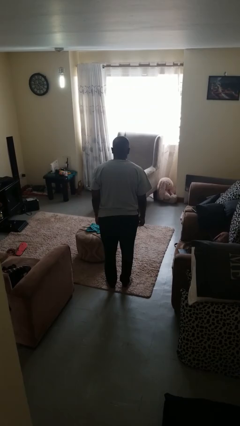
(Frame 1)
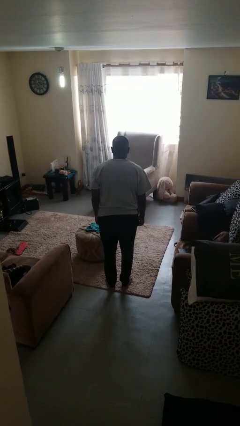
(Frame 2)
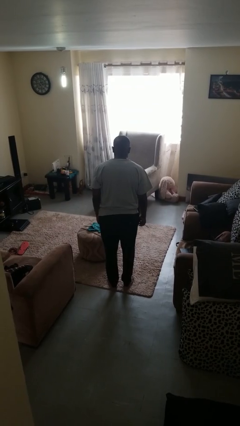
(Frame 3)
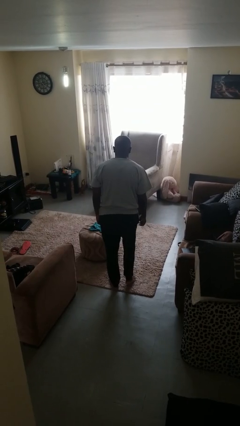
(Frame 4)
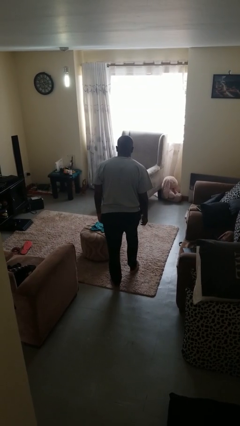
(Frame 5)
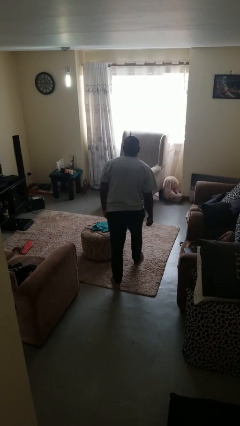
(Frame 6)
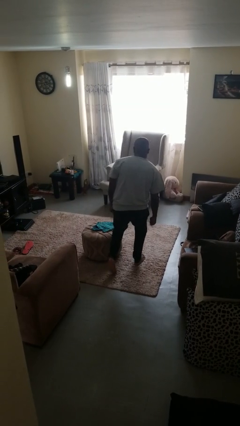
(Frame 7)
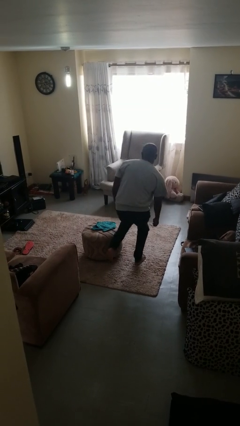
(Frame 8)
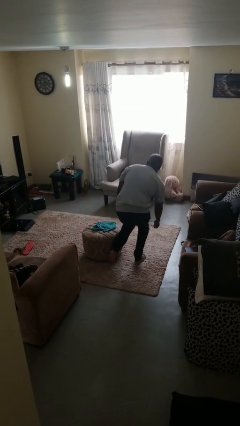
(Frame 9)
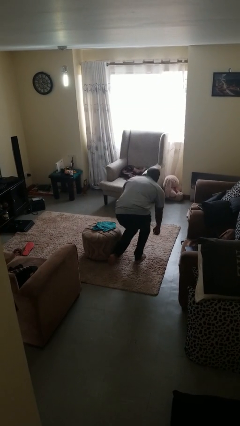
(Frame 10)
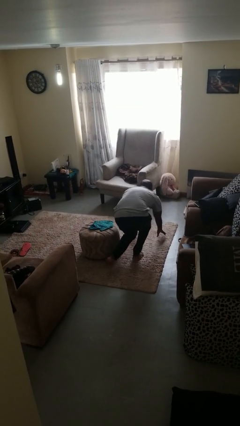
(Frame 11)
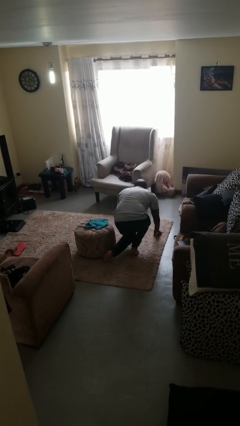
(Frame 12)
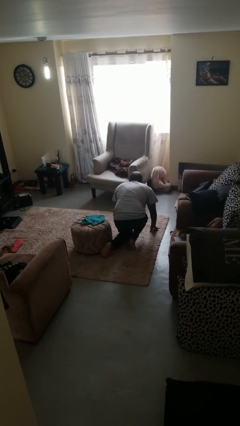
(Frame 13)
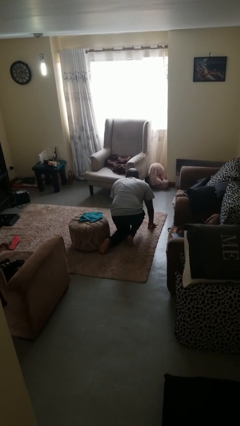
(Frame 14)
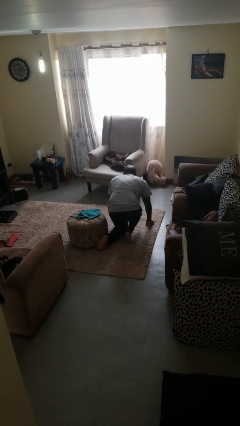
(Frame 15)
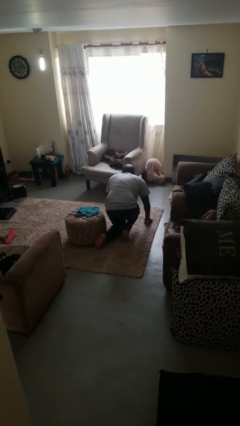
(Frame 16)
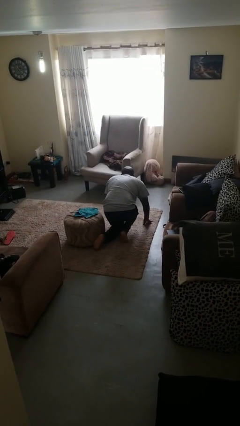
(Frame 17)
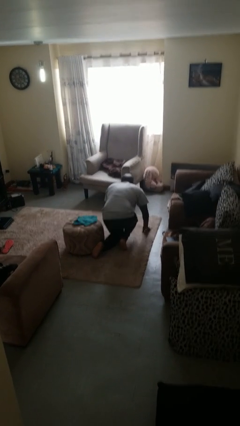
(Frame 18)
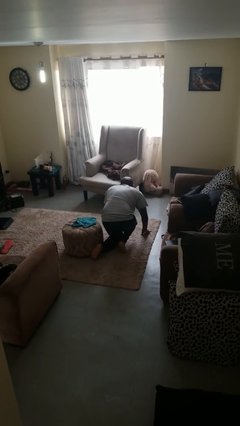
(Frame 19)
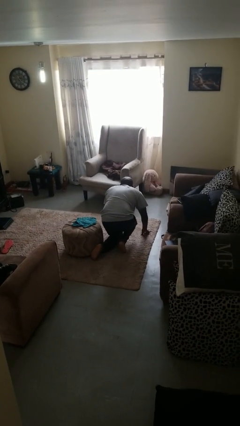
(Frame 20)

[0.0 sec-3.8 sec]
person trips on object on floor

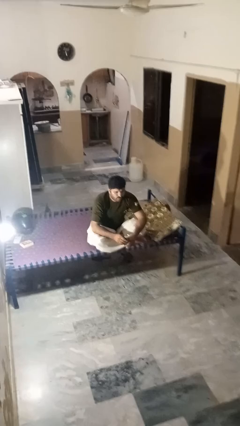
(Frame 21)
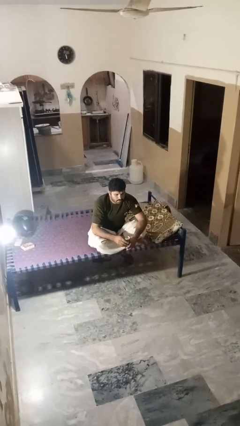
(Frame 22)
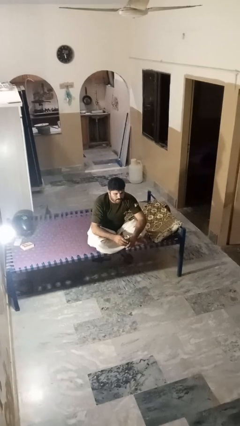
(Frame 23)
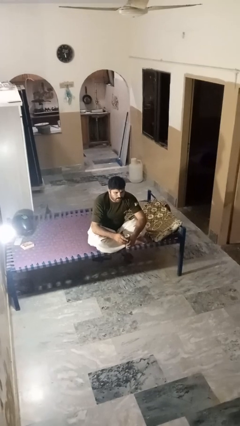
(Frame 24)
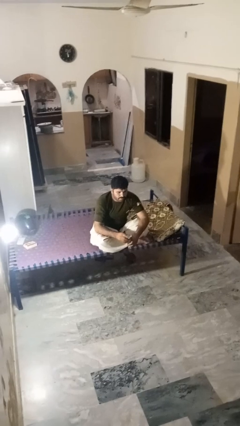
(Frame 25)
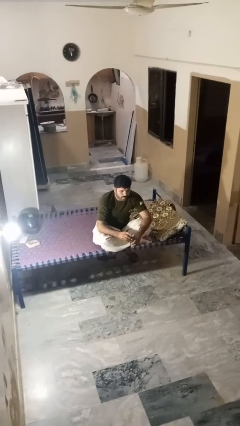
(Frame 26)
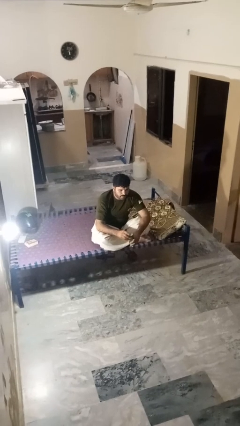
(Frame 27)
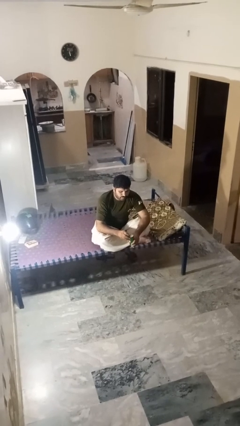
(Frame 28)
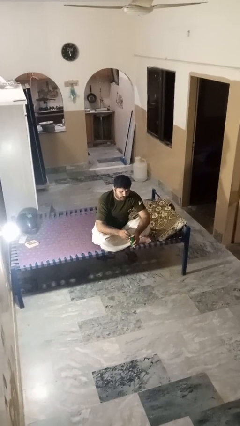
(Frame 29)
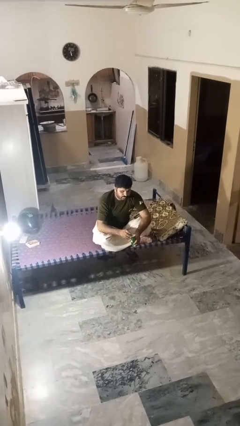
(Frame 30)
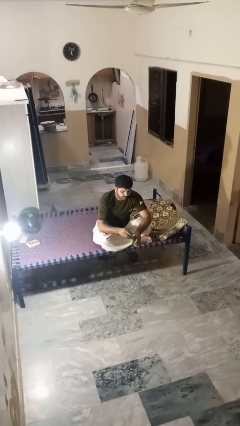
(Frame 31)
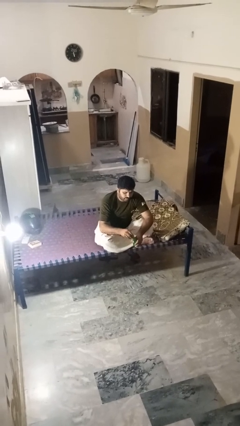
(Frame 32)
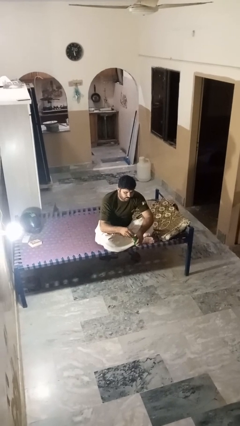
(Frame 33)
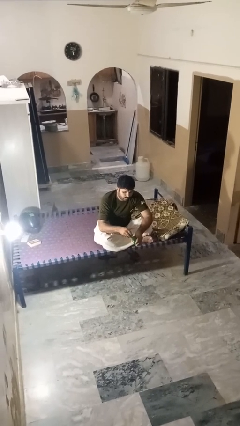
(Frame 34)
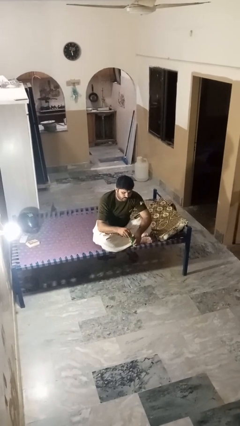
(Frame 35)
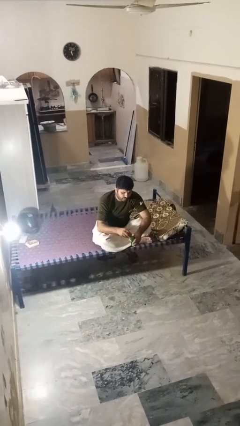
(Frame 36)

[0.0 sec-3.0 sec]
person opens beverage can

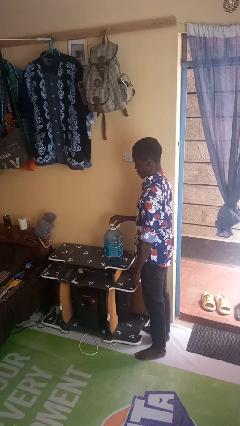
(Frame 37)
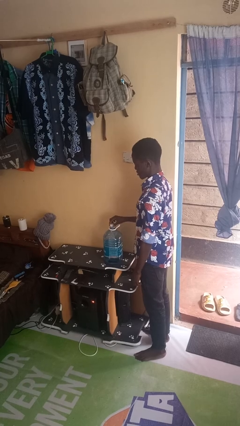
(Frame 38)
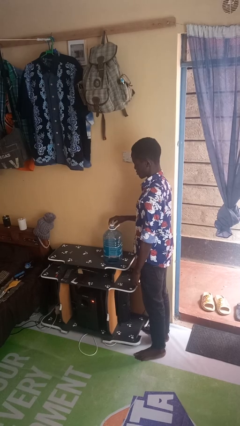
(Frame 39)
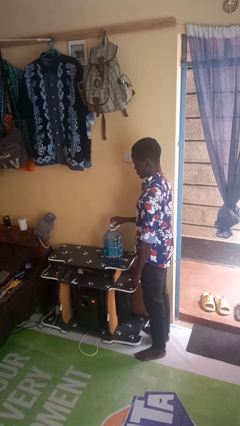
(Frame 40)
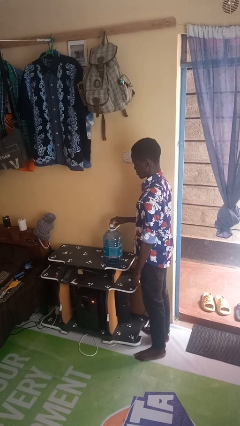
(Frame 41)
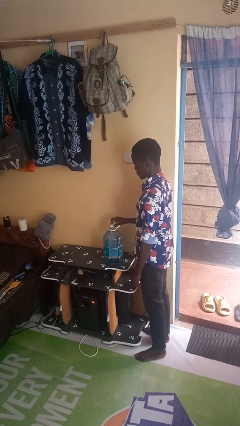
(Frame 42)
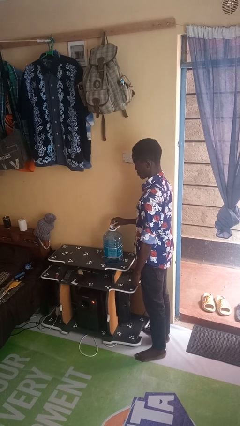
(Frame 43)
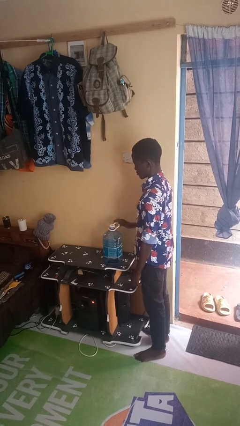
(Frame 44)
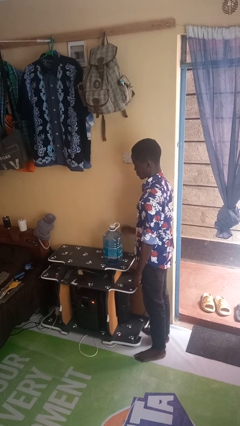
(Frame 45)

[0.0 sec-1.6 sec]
person screws lid to bottle

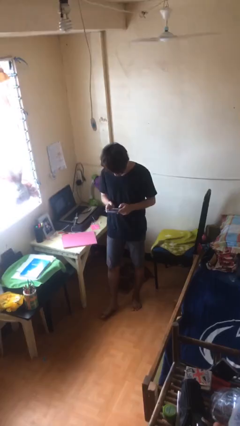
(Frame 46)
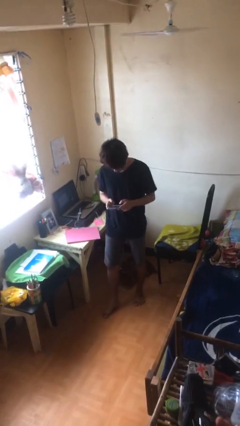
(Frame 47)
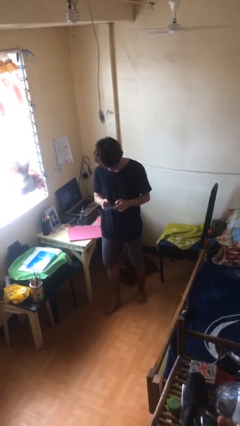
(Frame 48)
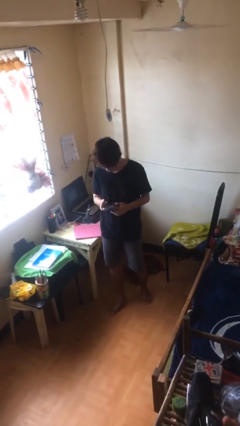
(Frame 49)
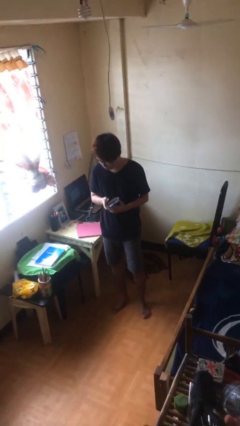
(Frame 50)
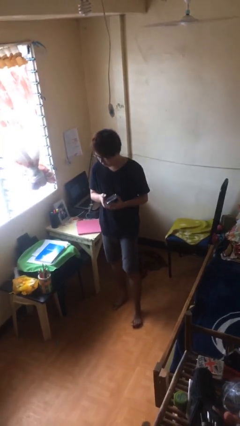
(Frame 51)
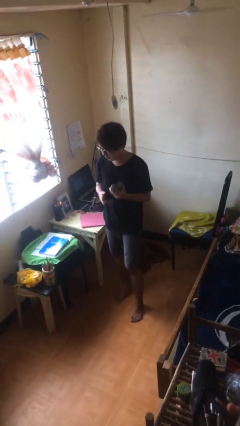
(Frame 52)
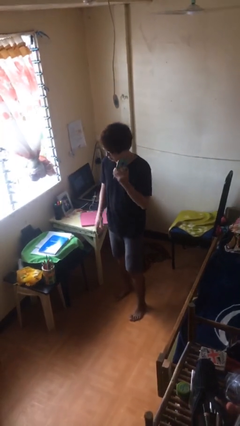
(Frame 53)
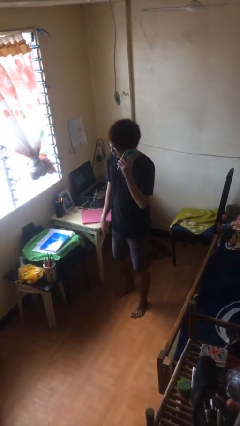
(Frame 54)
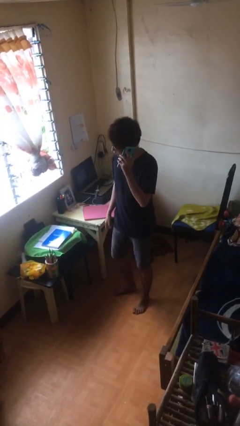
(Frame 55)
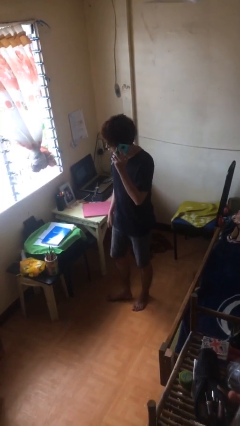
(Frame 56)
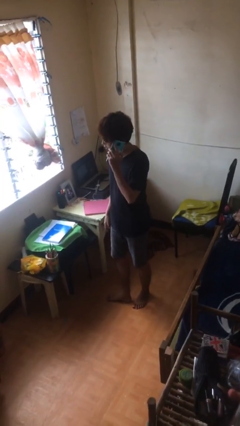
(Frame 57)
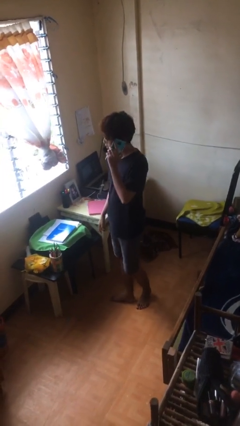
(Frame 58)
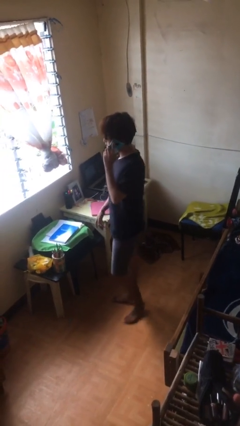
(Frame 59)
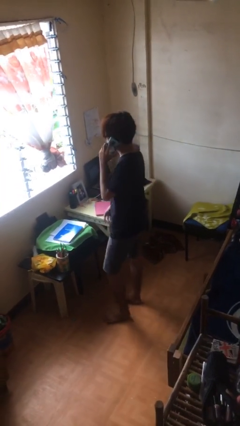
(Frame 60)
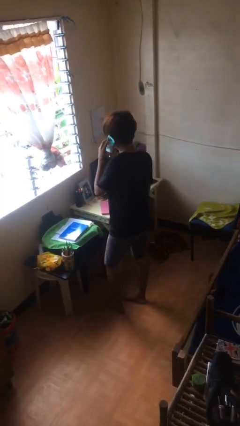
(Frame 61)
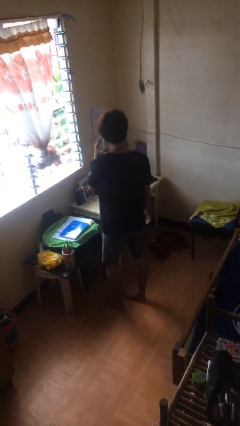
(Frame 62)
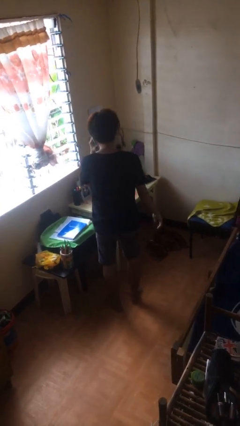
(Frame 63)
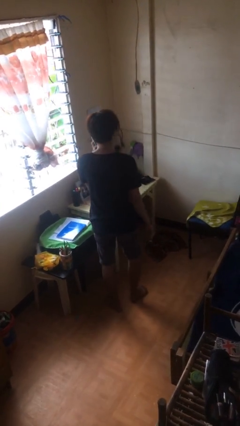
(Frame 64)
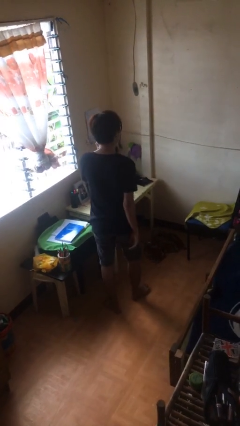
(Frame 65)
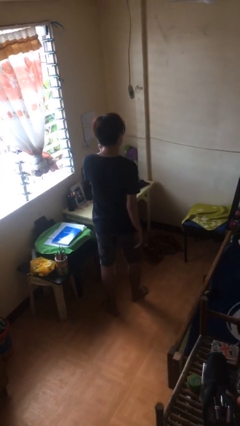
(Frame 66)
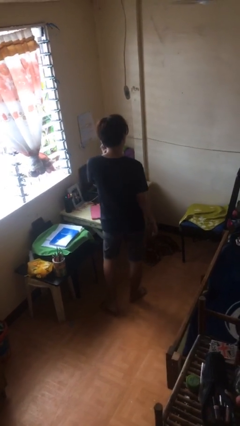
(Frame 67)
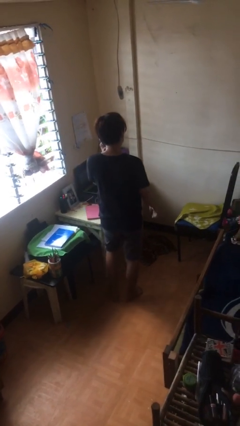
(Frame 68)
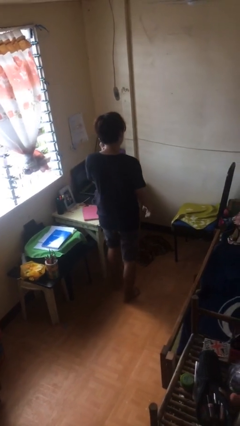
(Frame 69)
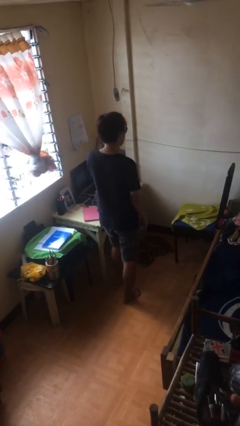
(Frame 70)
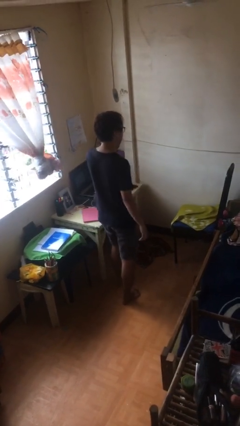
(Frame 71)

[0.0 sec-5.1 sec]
person talks on phone

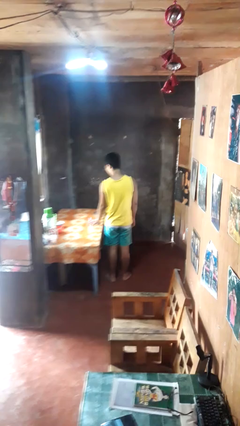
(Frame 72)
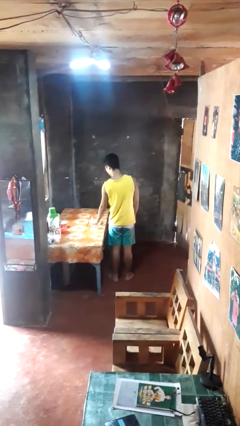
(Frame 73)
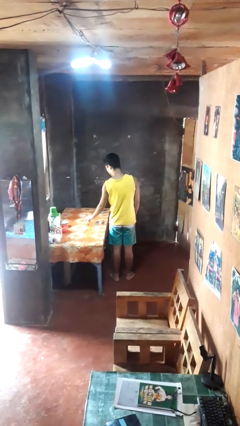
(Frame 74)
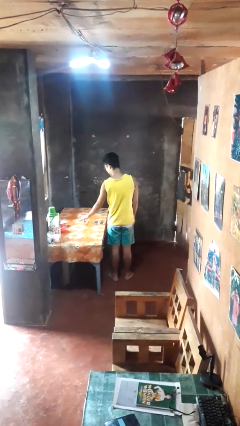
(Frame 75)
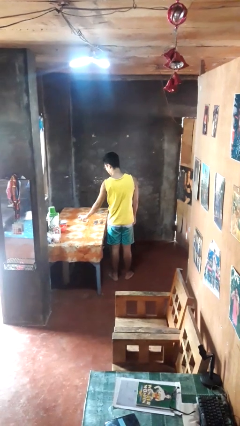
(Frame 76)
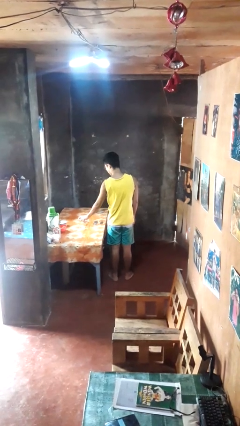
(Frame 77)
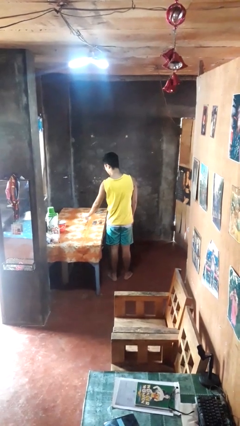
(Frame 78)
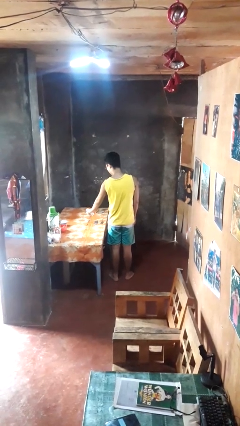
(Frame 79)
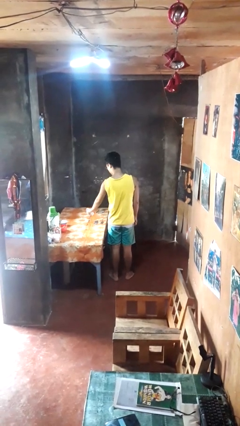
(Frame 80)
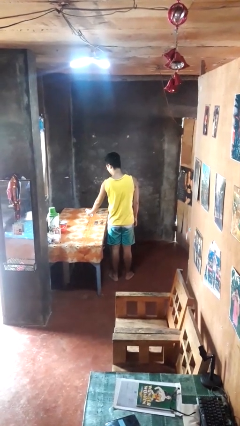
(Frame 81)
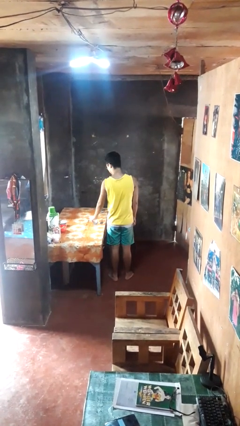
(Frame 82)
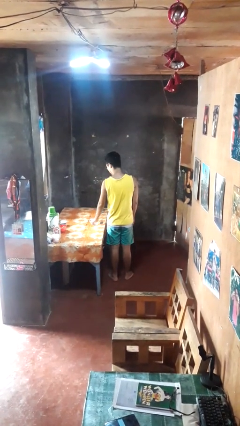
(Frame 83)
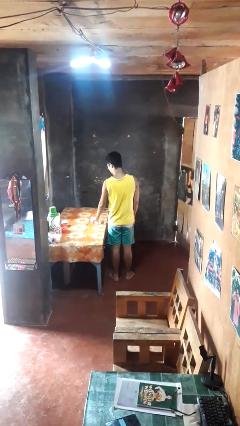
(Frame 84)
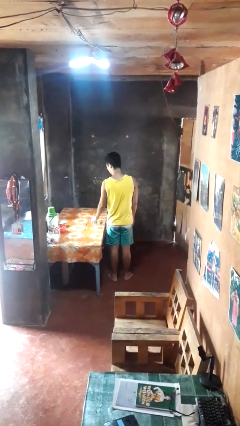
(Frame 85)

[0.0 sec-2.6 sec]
person sprays from bottle

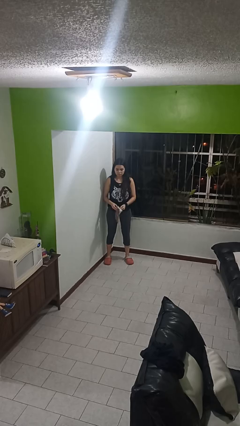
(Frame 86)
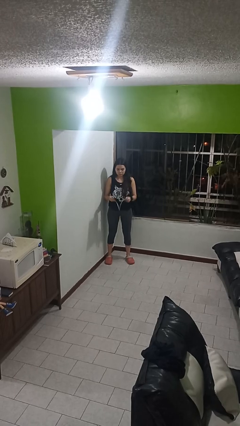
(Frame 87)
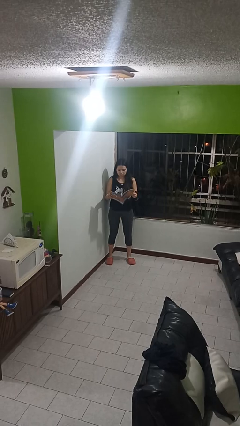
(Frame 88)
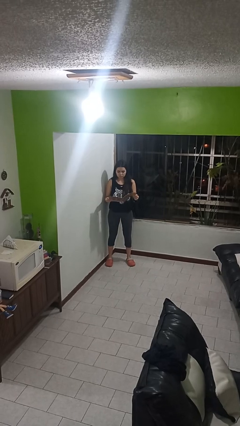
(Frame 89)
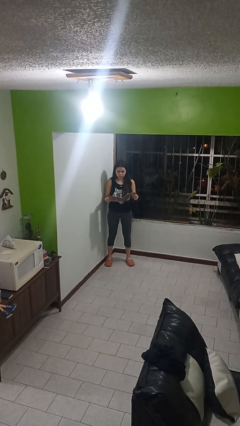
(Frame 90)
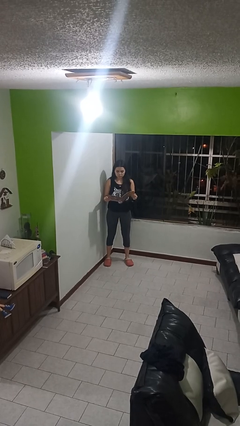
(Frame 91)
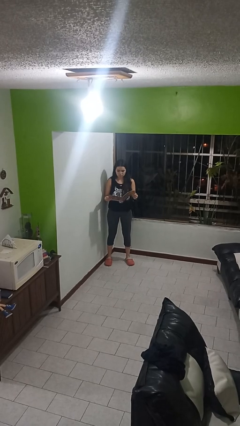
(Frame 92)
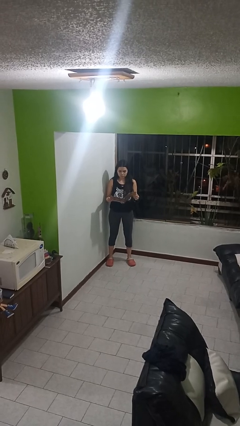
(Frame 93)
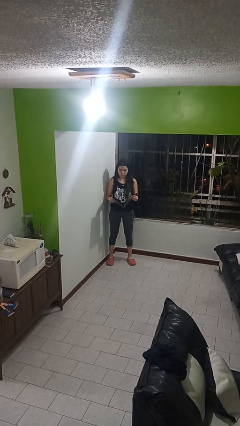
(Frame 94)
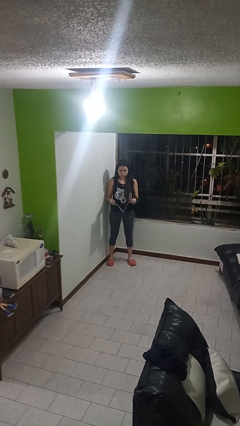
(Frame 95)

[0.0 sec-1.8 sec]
person reads magazine
